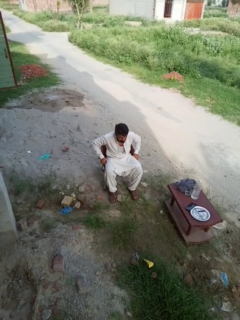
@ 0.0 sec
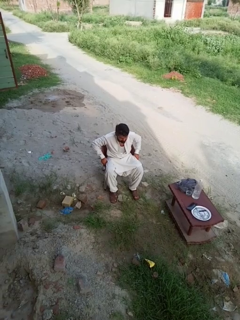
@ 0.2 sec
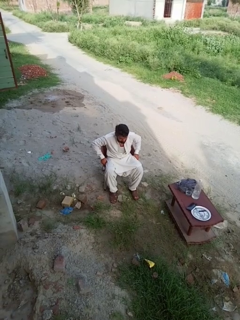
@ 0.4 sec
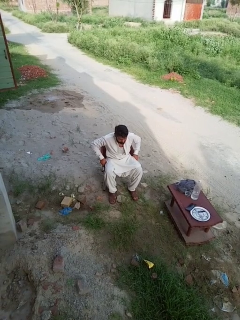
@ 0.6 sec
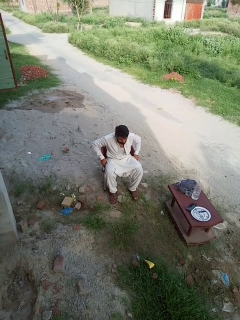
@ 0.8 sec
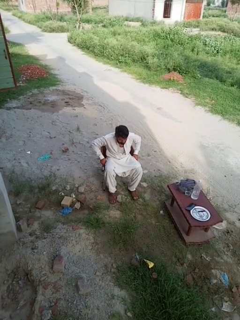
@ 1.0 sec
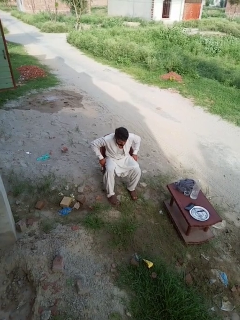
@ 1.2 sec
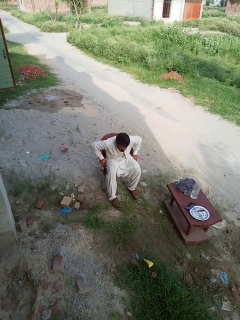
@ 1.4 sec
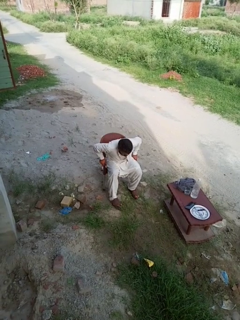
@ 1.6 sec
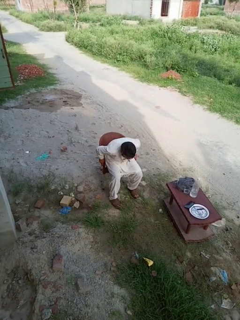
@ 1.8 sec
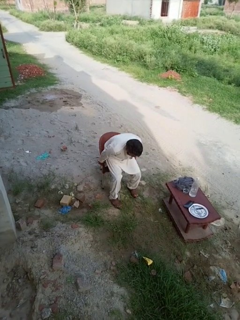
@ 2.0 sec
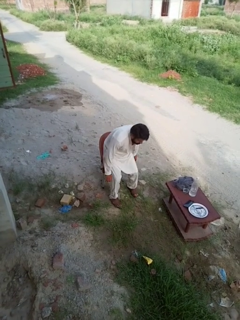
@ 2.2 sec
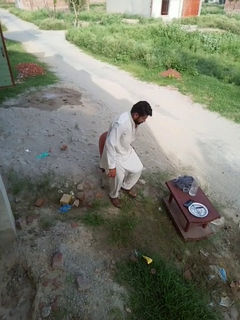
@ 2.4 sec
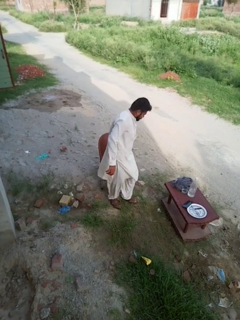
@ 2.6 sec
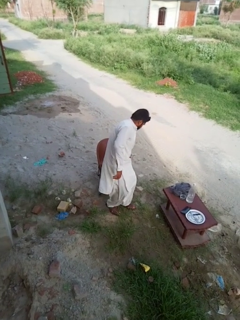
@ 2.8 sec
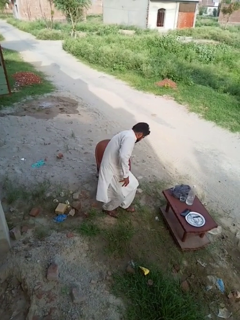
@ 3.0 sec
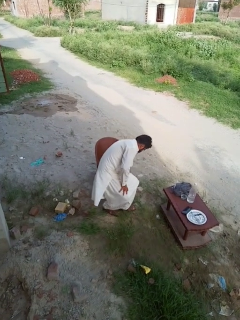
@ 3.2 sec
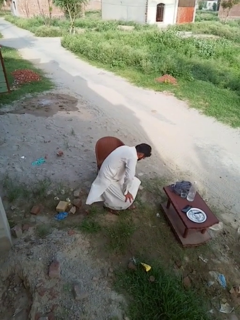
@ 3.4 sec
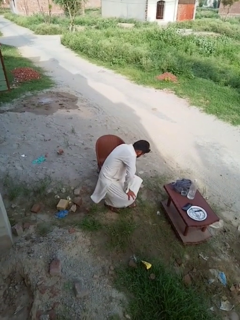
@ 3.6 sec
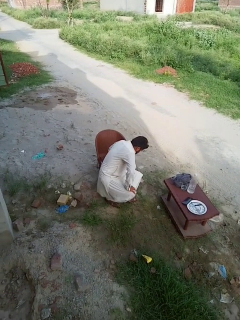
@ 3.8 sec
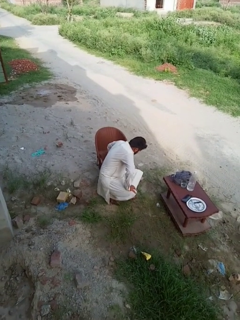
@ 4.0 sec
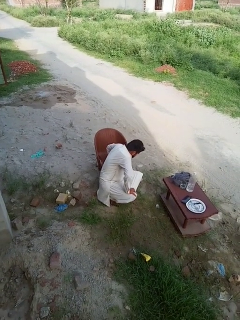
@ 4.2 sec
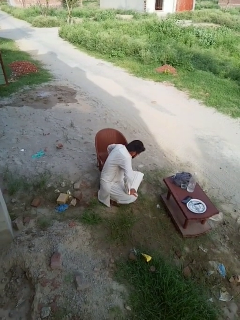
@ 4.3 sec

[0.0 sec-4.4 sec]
person falls from chair

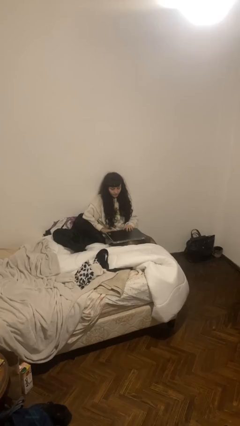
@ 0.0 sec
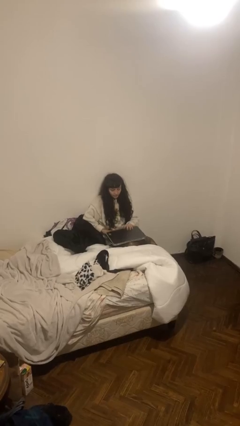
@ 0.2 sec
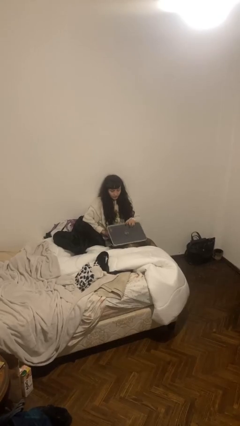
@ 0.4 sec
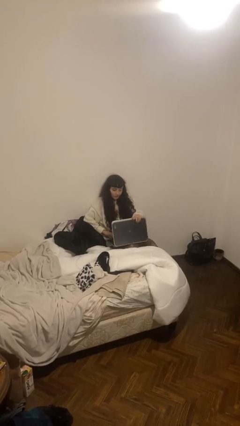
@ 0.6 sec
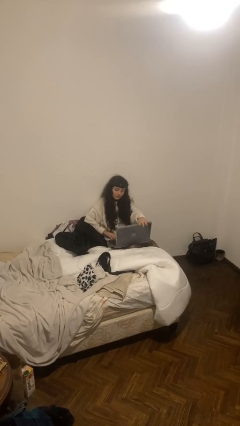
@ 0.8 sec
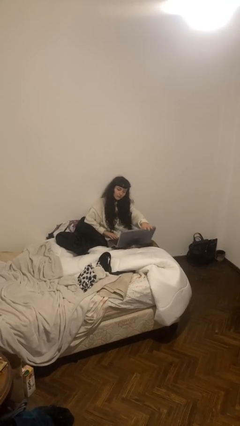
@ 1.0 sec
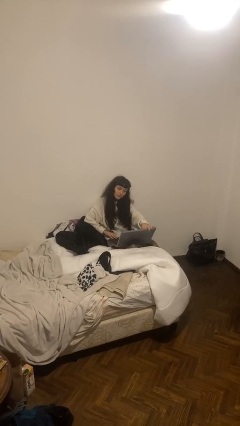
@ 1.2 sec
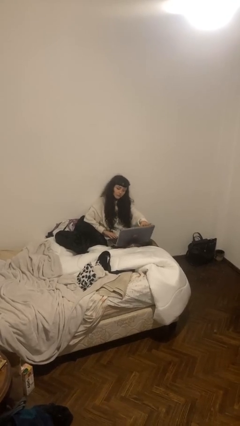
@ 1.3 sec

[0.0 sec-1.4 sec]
person opens laptop

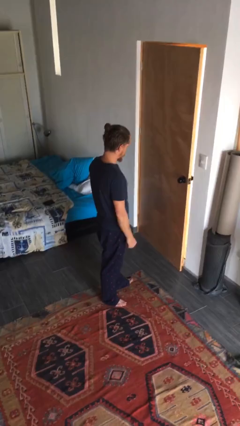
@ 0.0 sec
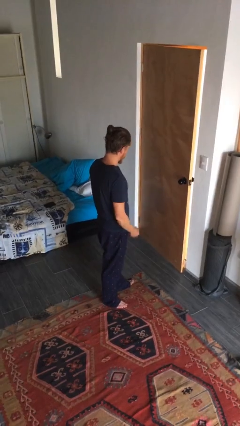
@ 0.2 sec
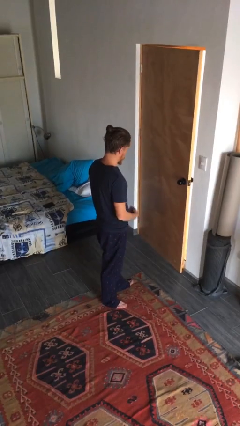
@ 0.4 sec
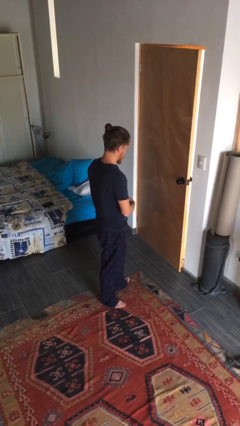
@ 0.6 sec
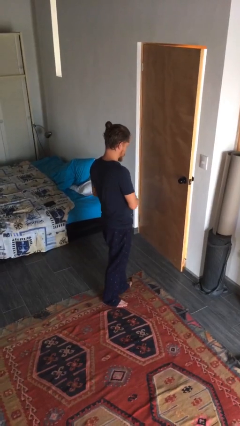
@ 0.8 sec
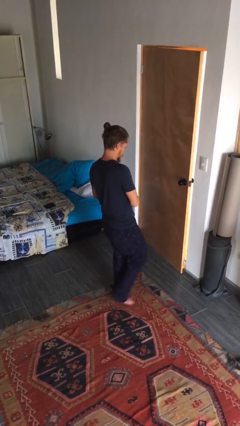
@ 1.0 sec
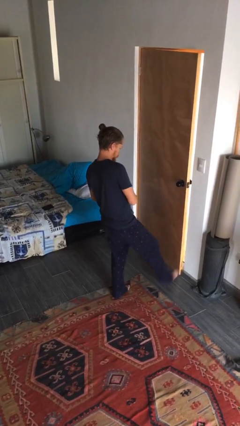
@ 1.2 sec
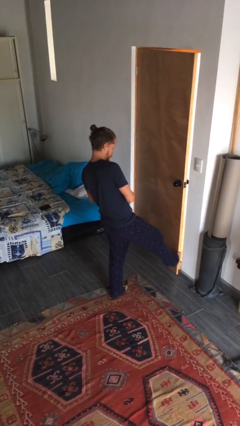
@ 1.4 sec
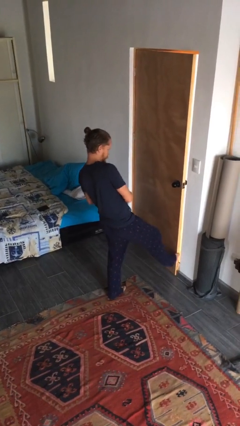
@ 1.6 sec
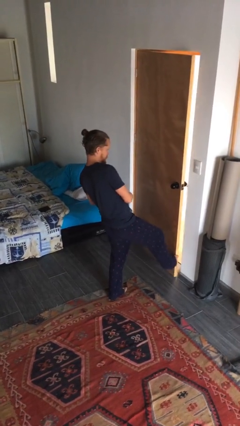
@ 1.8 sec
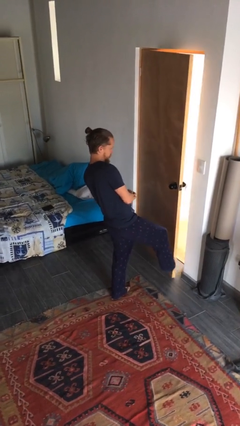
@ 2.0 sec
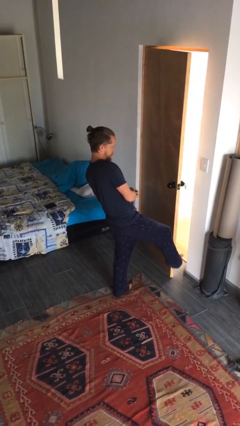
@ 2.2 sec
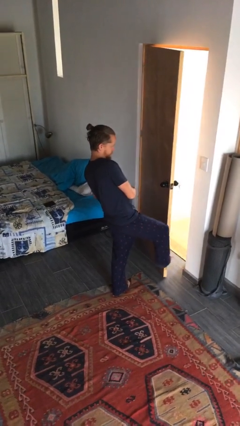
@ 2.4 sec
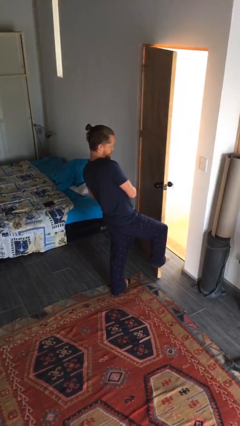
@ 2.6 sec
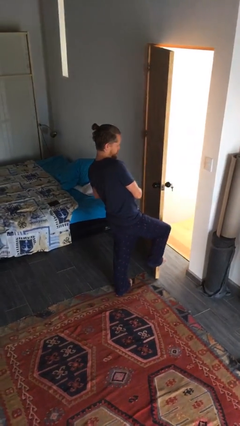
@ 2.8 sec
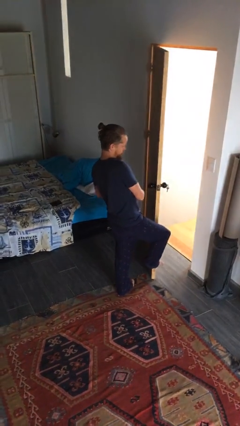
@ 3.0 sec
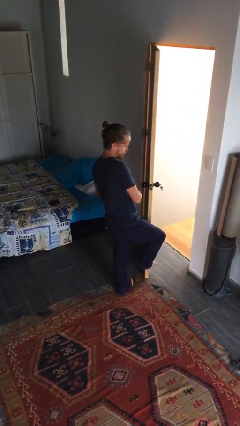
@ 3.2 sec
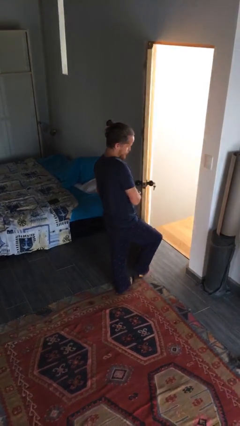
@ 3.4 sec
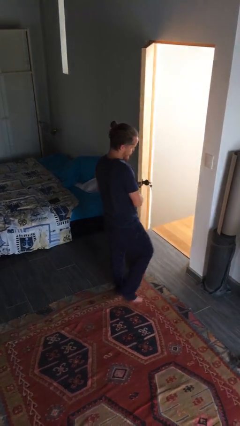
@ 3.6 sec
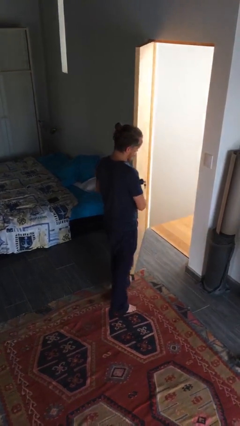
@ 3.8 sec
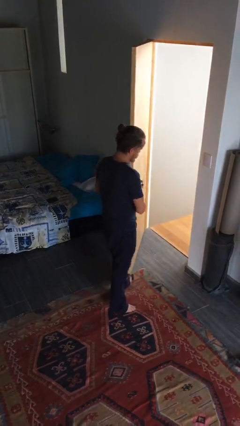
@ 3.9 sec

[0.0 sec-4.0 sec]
person opens facility door

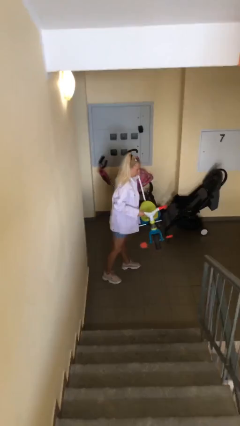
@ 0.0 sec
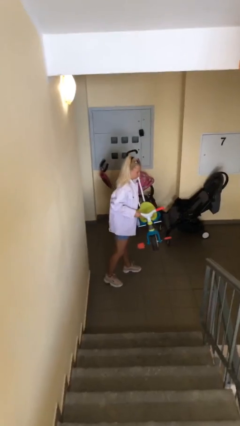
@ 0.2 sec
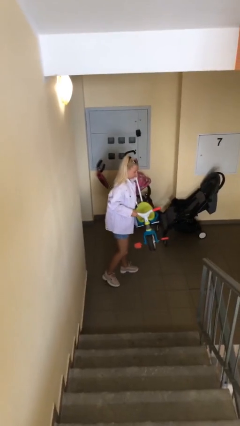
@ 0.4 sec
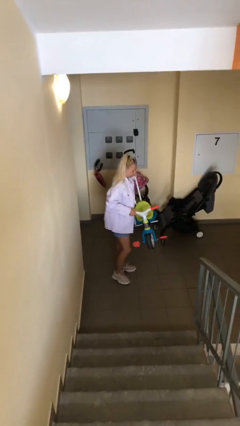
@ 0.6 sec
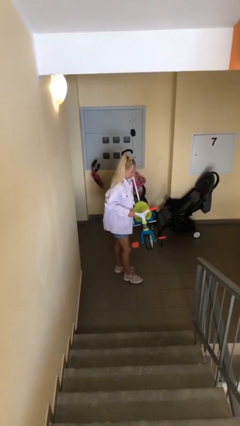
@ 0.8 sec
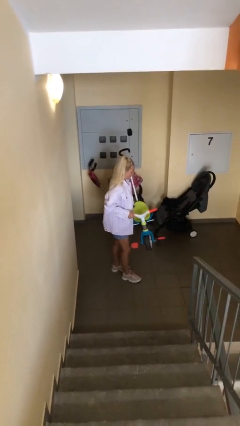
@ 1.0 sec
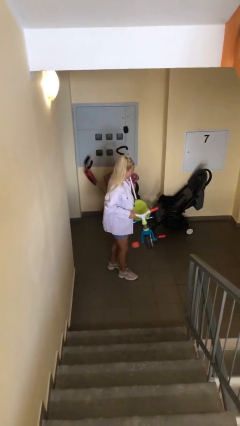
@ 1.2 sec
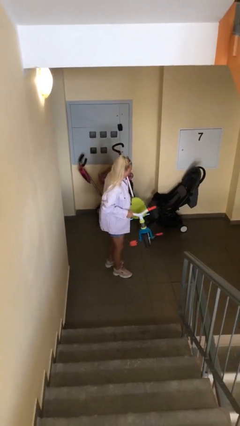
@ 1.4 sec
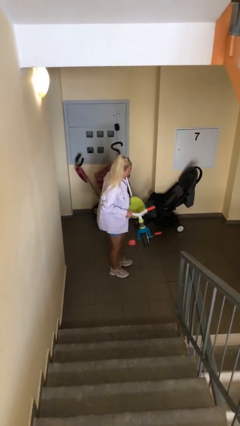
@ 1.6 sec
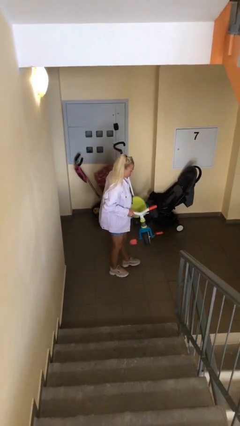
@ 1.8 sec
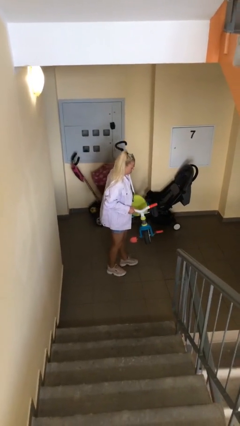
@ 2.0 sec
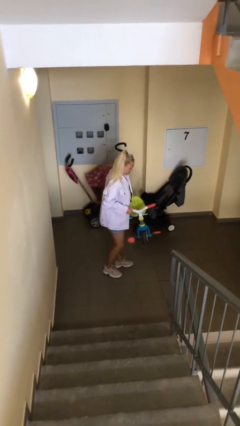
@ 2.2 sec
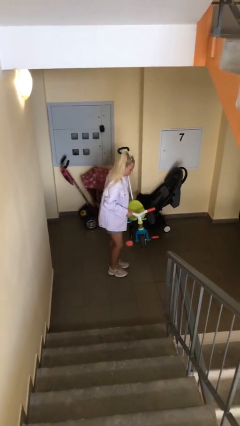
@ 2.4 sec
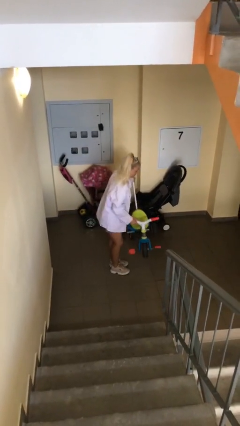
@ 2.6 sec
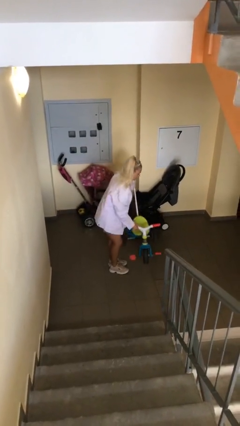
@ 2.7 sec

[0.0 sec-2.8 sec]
person carries heavy object

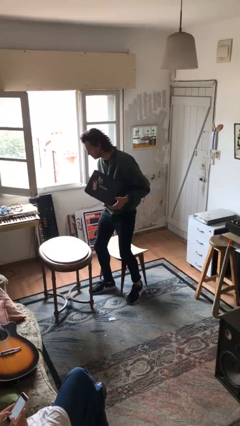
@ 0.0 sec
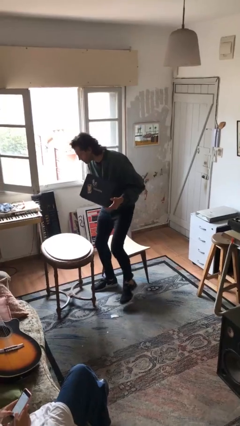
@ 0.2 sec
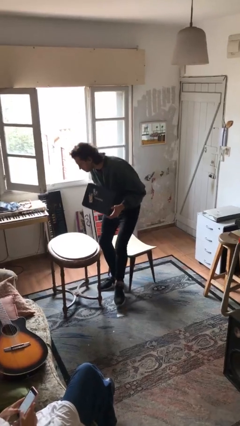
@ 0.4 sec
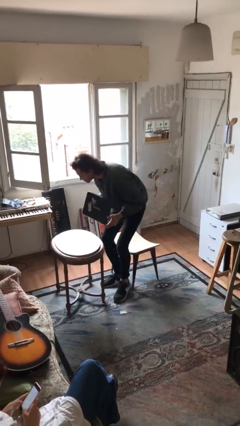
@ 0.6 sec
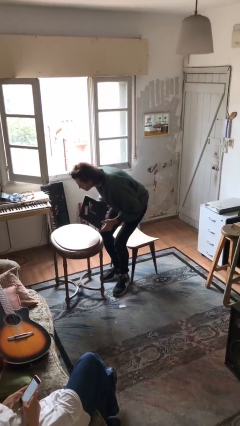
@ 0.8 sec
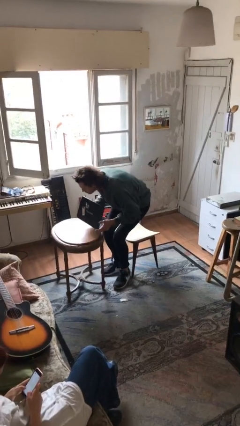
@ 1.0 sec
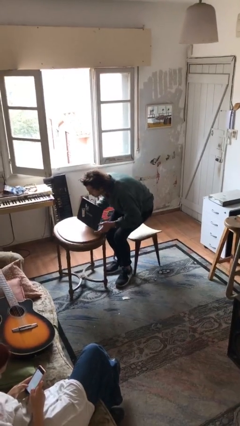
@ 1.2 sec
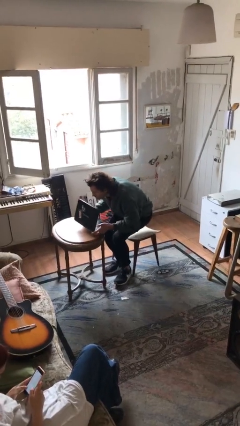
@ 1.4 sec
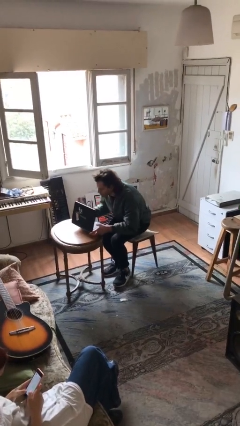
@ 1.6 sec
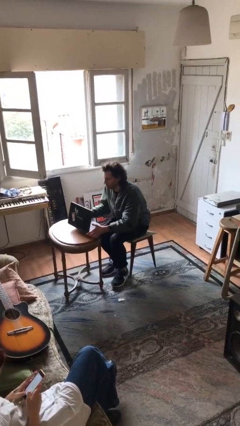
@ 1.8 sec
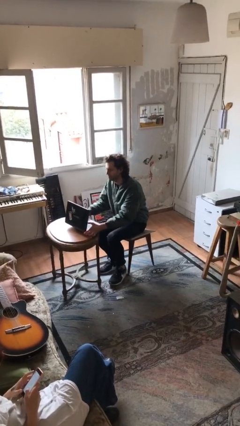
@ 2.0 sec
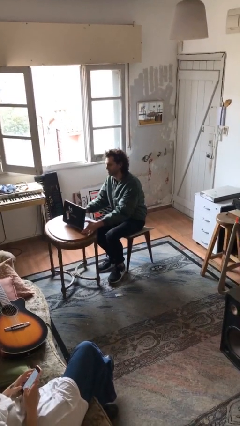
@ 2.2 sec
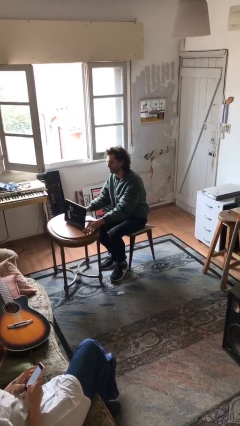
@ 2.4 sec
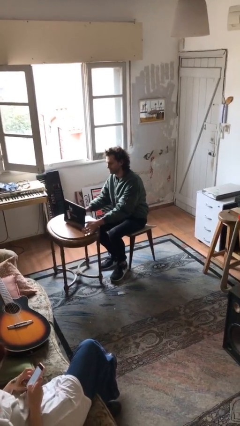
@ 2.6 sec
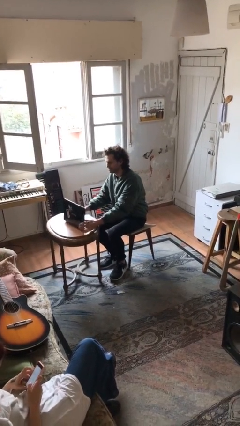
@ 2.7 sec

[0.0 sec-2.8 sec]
person sits down

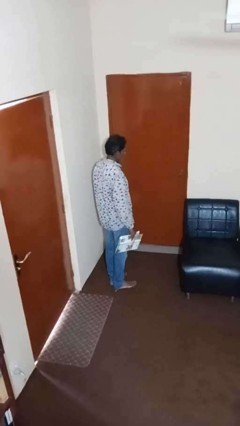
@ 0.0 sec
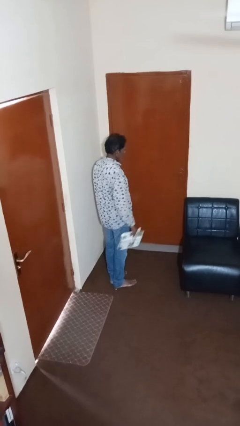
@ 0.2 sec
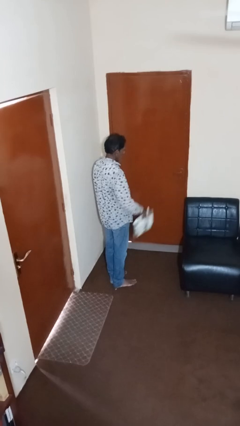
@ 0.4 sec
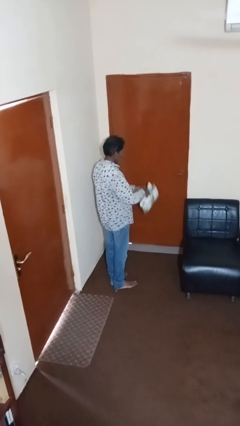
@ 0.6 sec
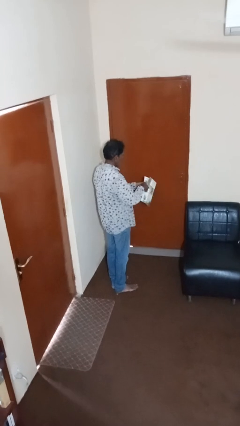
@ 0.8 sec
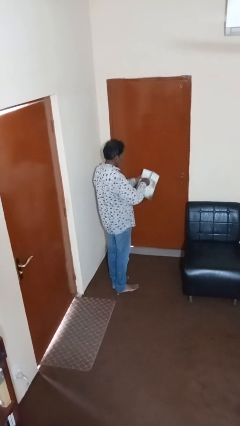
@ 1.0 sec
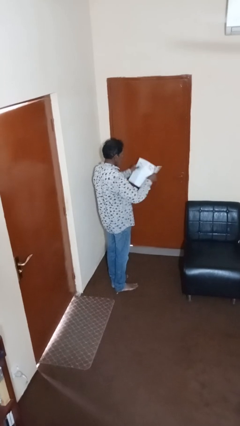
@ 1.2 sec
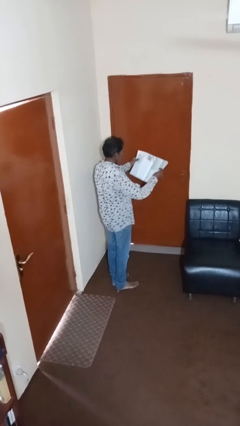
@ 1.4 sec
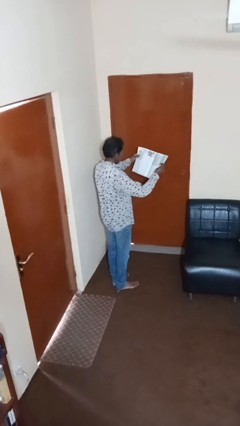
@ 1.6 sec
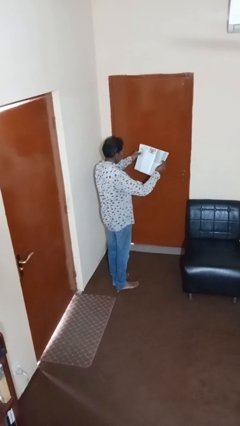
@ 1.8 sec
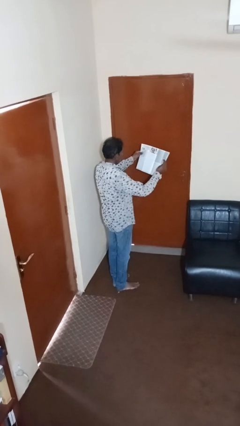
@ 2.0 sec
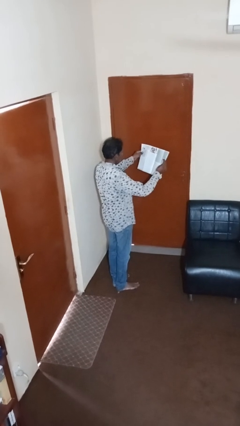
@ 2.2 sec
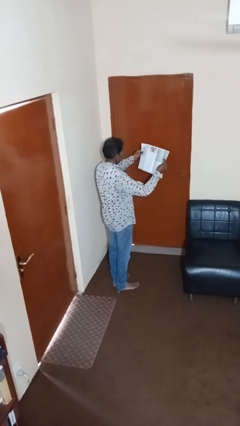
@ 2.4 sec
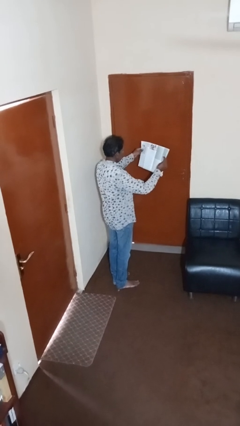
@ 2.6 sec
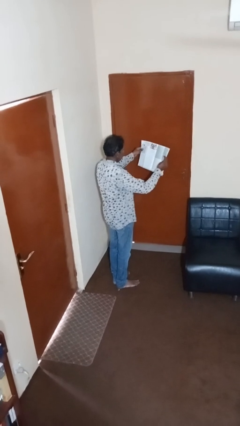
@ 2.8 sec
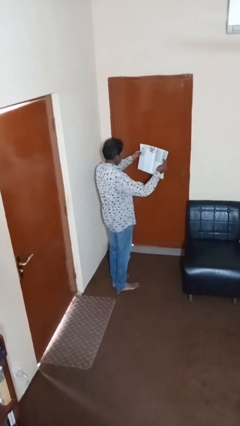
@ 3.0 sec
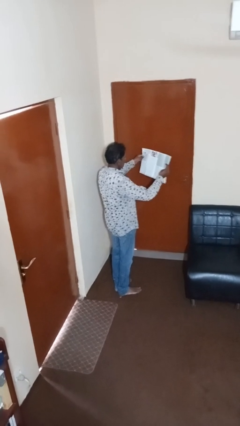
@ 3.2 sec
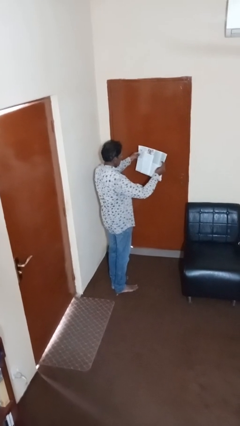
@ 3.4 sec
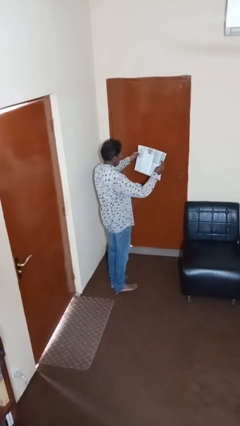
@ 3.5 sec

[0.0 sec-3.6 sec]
person reads magazine
